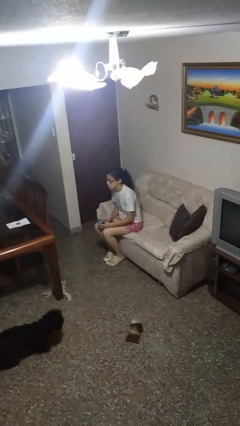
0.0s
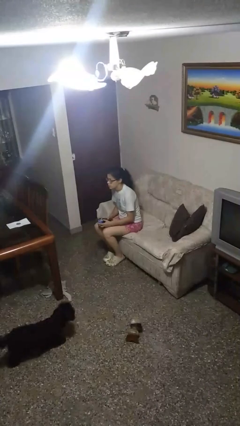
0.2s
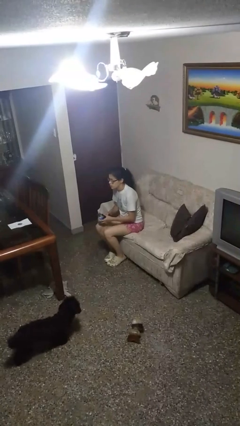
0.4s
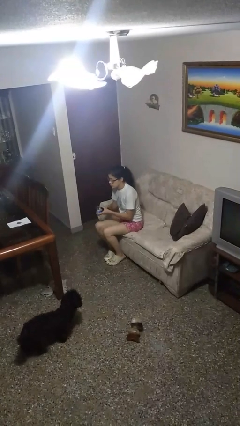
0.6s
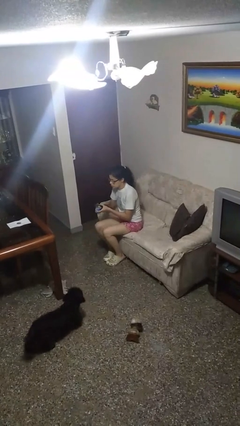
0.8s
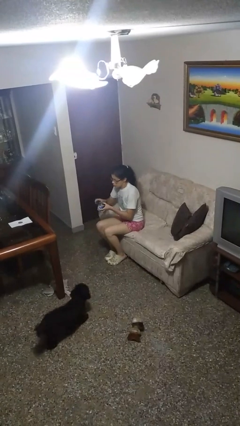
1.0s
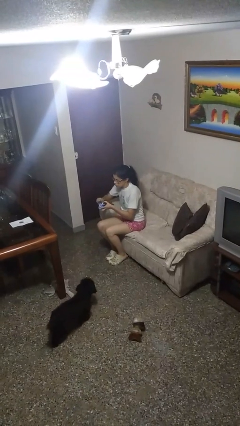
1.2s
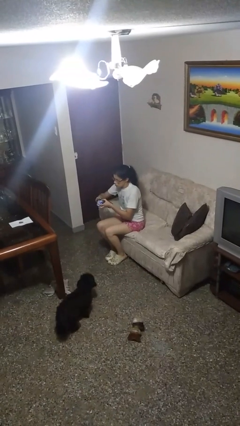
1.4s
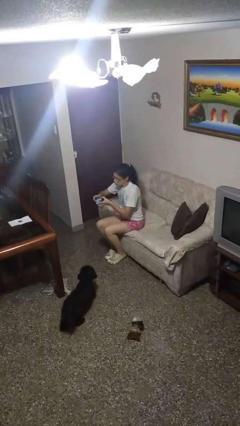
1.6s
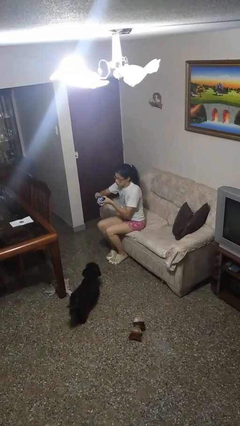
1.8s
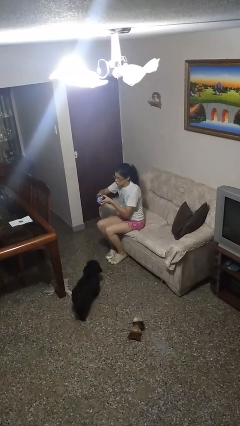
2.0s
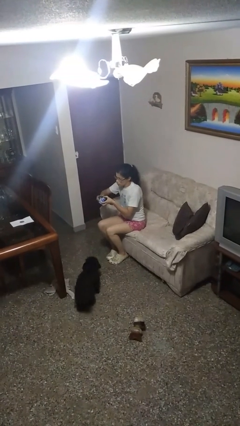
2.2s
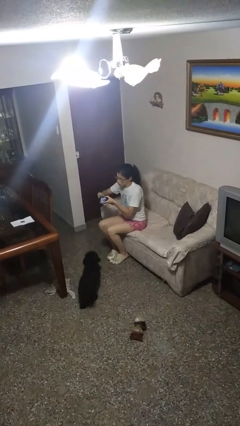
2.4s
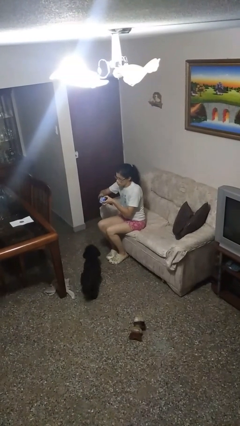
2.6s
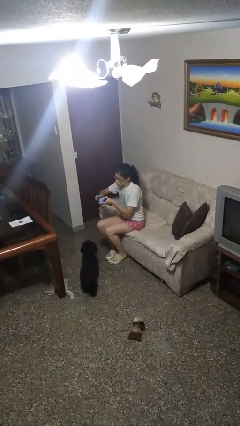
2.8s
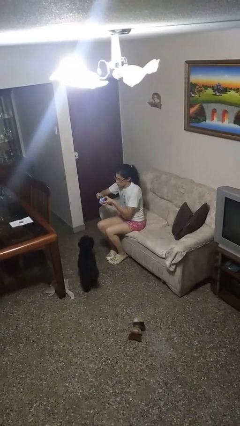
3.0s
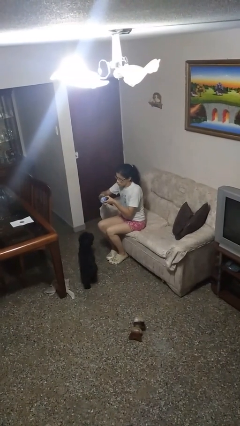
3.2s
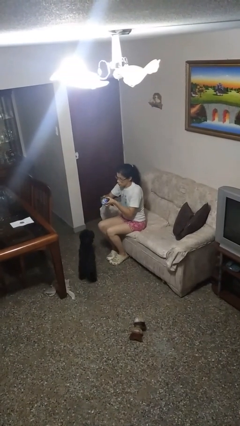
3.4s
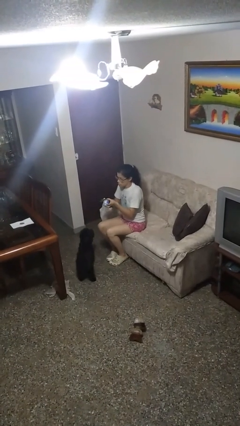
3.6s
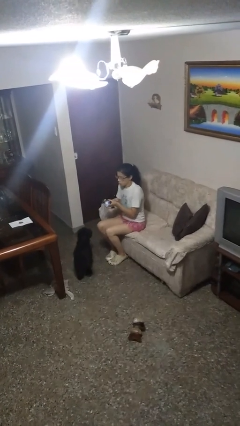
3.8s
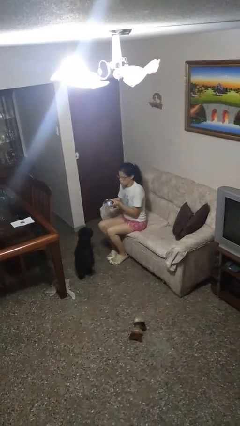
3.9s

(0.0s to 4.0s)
person opens can with can opener

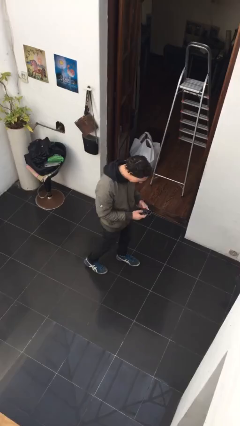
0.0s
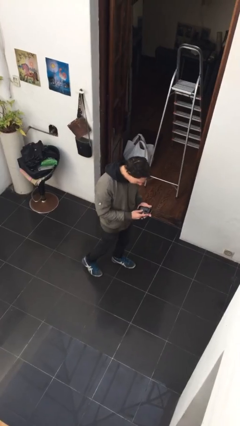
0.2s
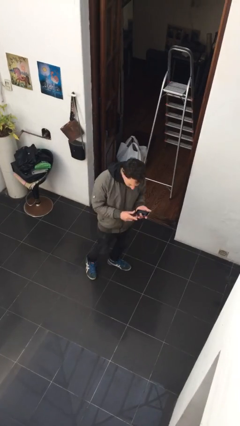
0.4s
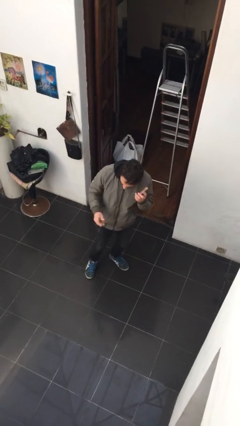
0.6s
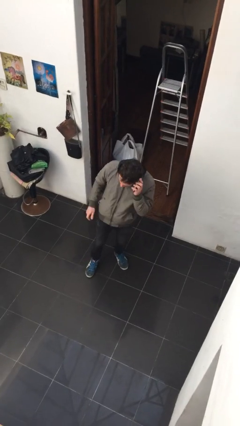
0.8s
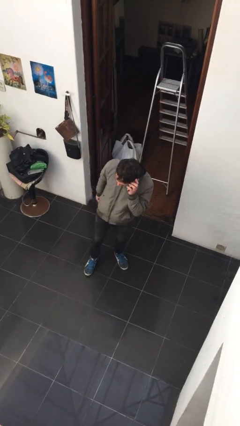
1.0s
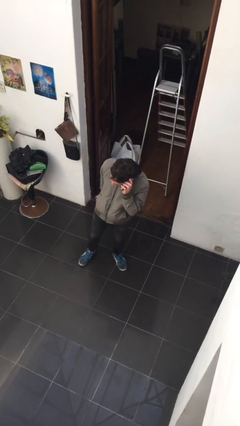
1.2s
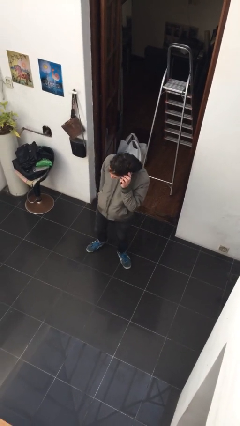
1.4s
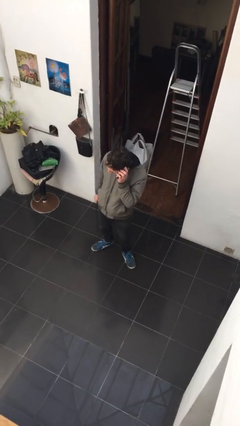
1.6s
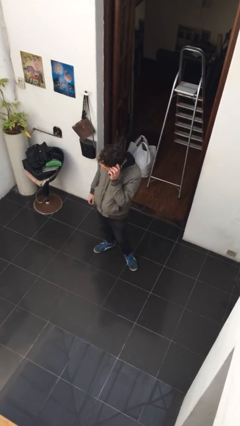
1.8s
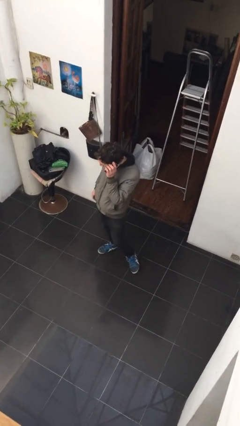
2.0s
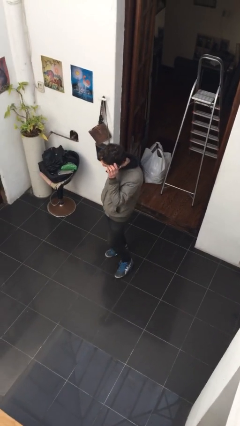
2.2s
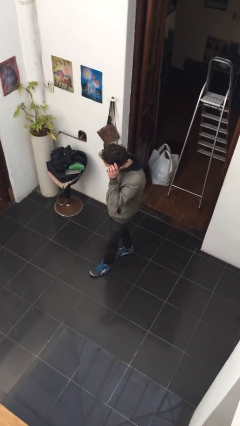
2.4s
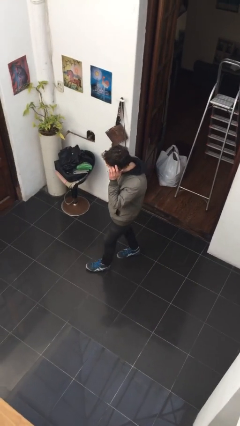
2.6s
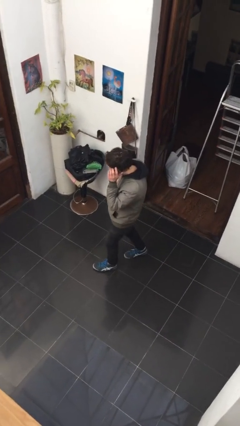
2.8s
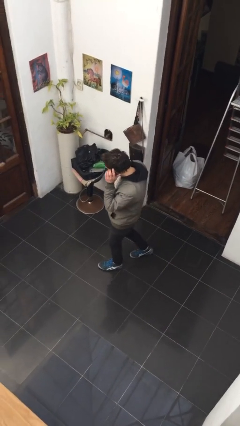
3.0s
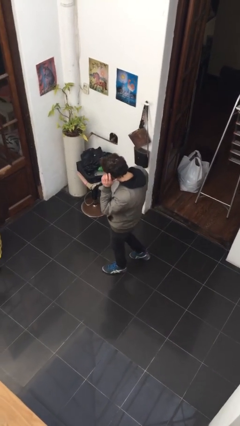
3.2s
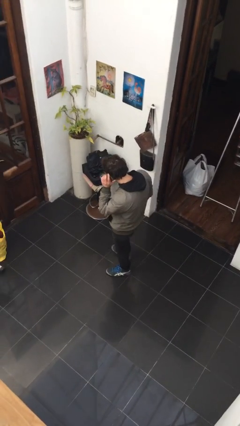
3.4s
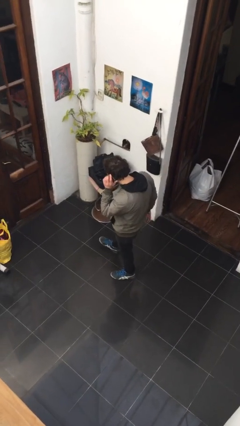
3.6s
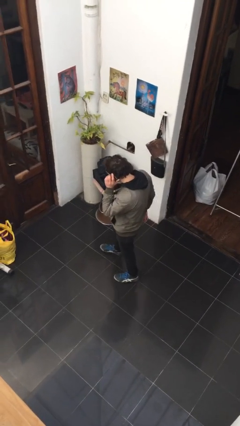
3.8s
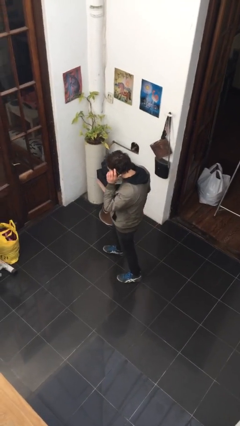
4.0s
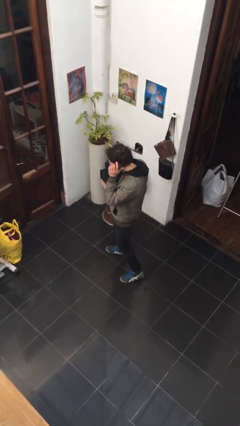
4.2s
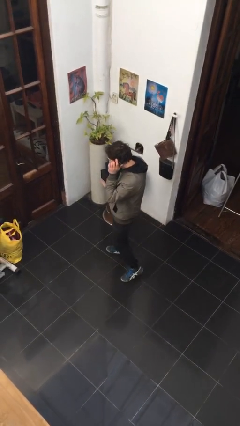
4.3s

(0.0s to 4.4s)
person talks on phone

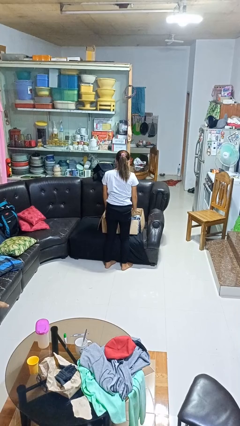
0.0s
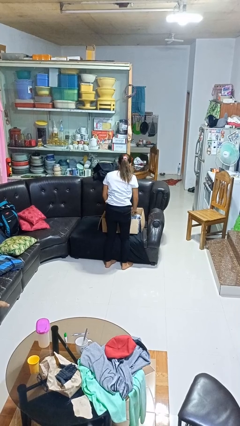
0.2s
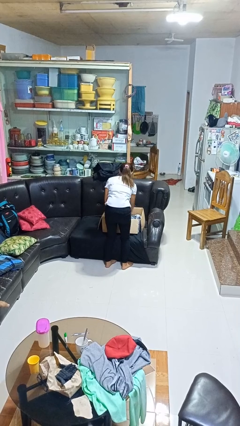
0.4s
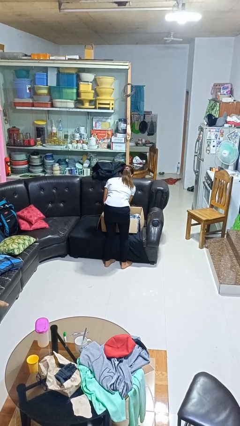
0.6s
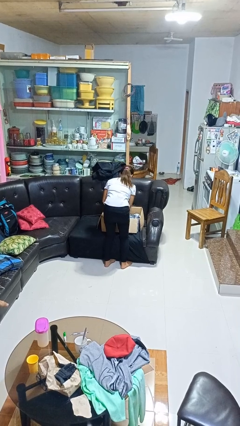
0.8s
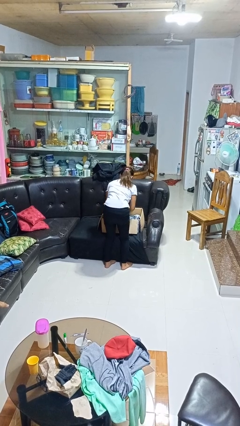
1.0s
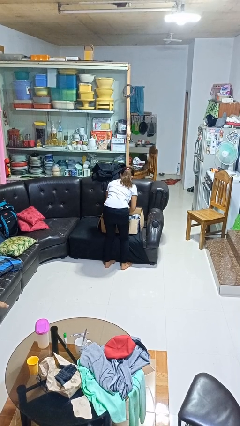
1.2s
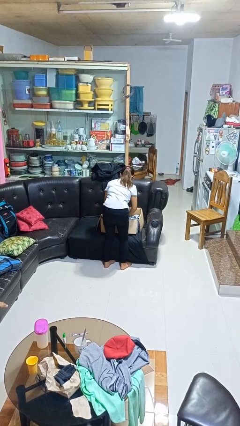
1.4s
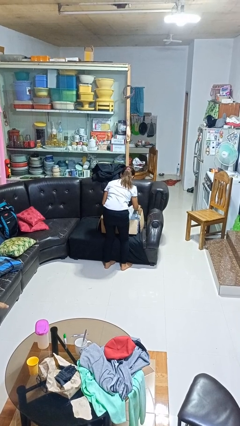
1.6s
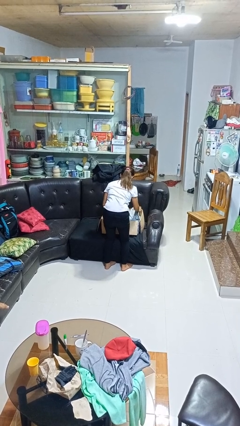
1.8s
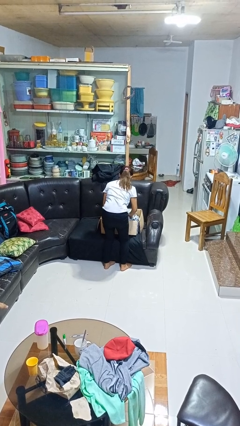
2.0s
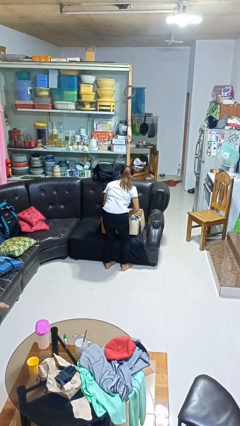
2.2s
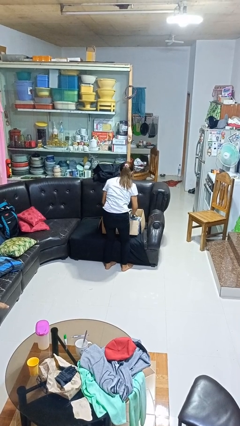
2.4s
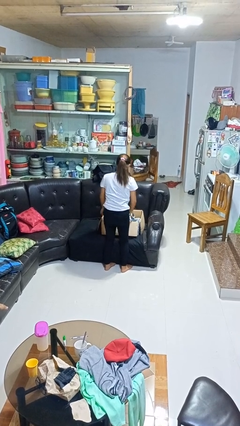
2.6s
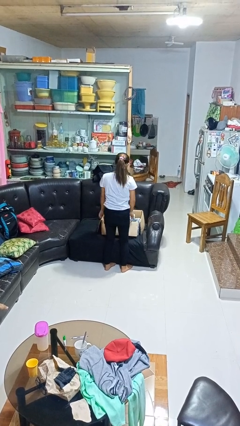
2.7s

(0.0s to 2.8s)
person searches in box

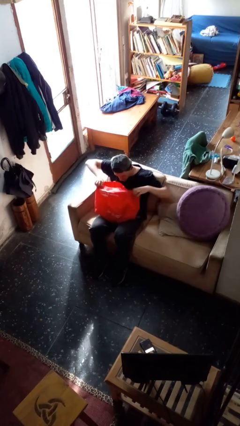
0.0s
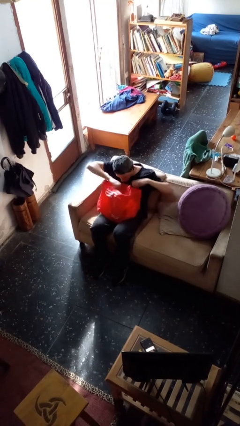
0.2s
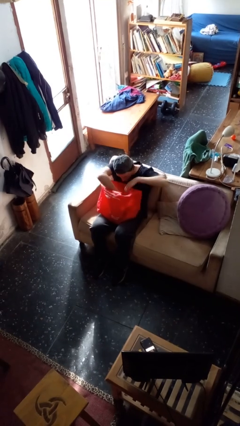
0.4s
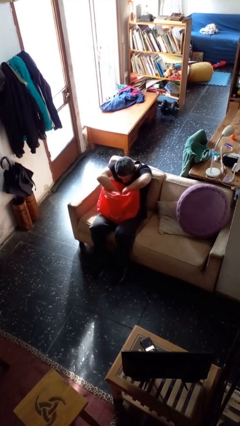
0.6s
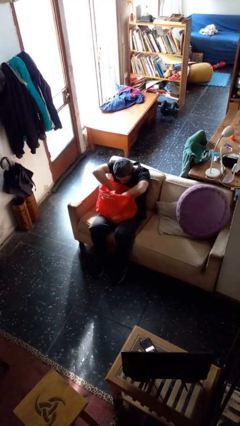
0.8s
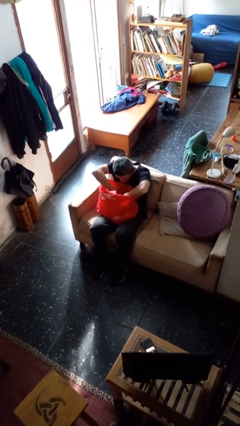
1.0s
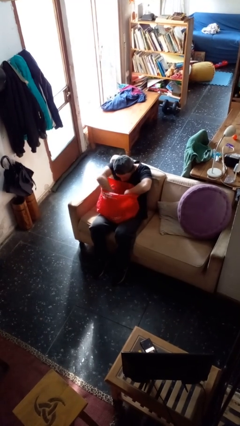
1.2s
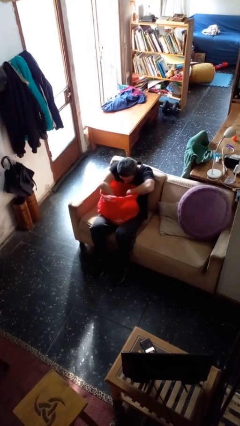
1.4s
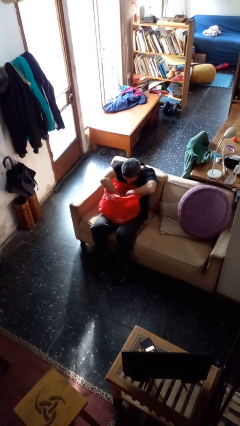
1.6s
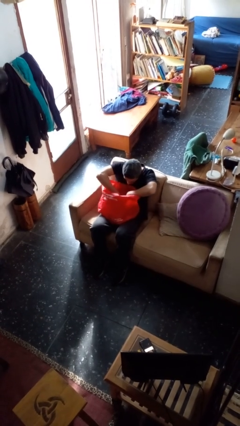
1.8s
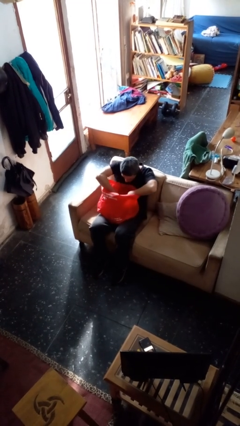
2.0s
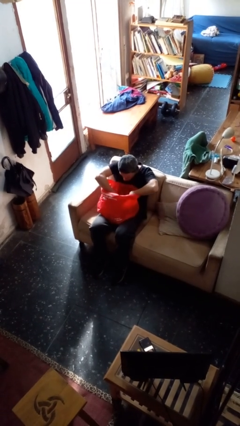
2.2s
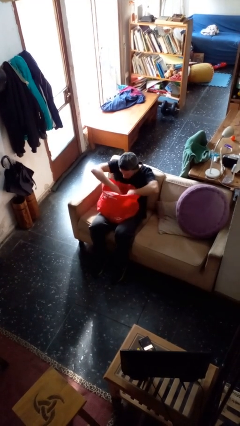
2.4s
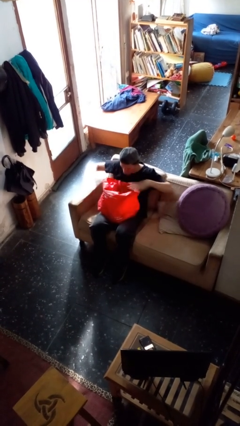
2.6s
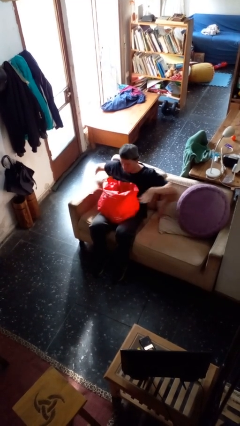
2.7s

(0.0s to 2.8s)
person searches in bag

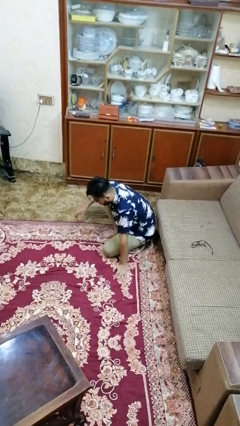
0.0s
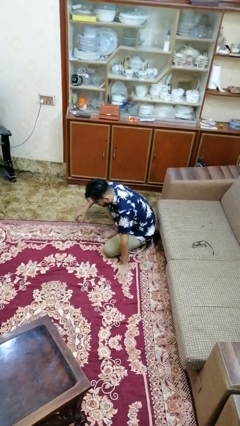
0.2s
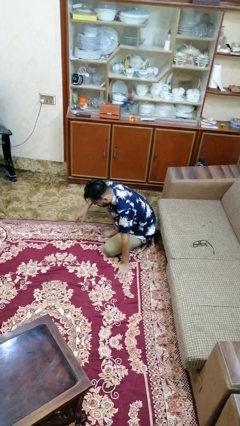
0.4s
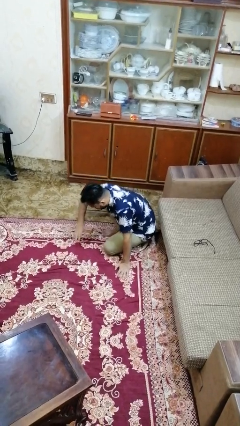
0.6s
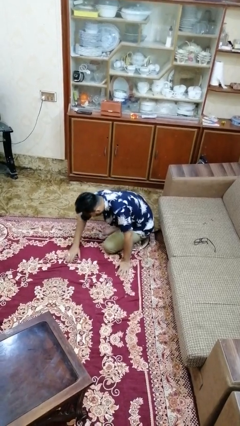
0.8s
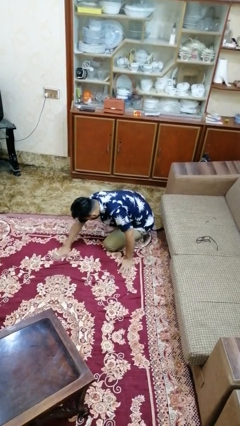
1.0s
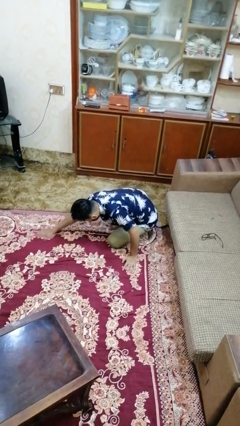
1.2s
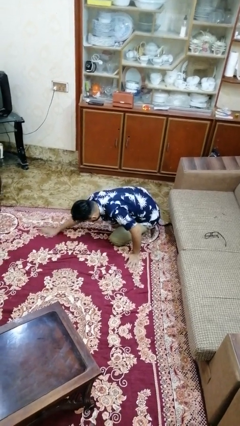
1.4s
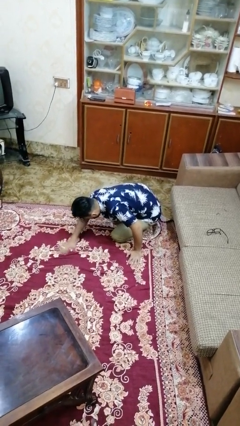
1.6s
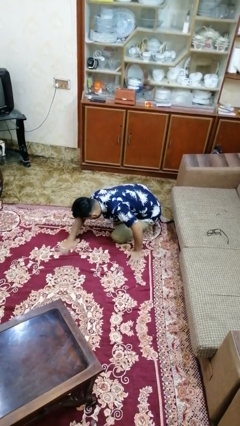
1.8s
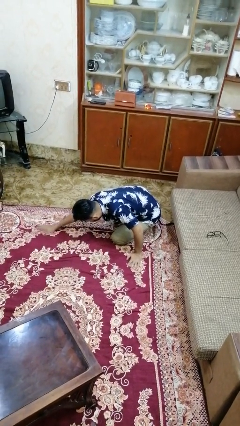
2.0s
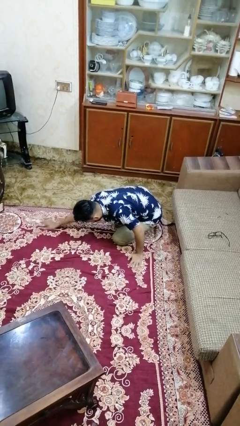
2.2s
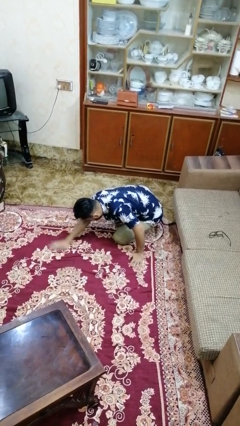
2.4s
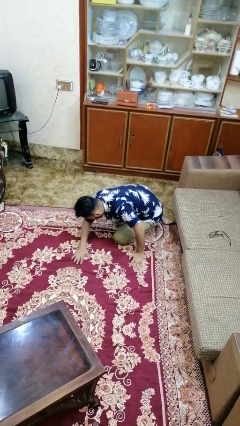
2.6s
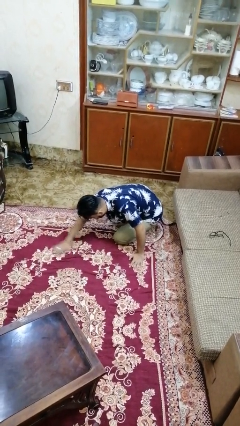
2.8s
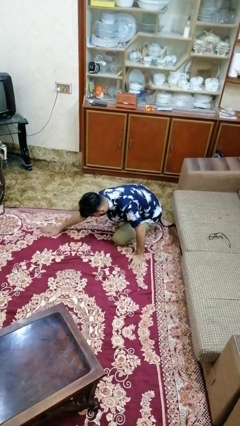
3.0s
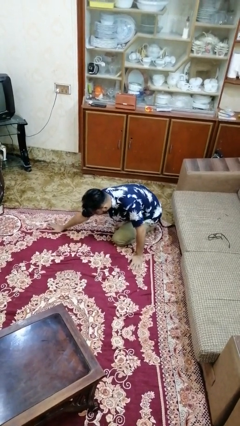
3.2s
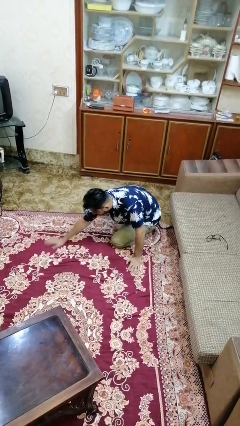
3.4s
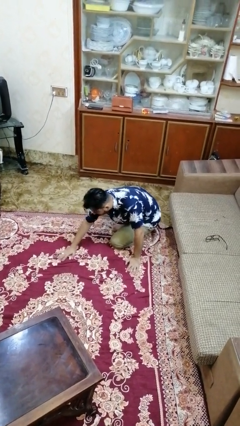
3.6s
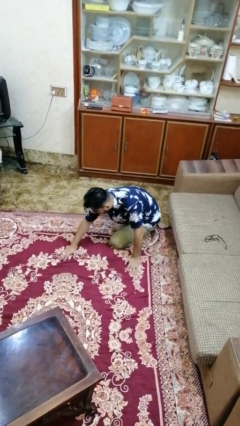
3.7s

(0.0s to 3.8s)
person sweeps floor
